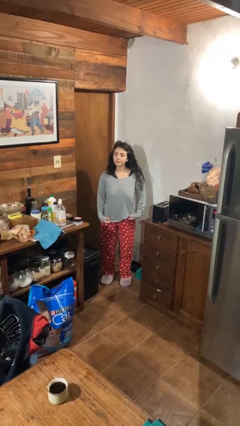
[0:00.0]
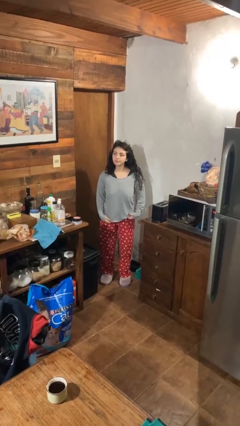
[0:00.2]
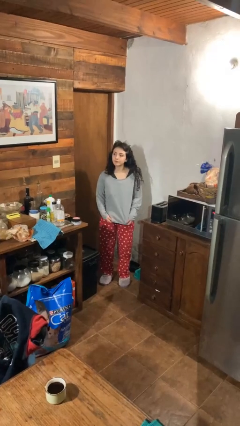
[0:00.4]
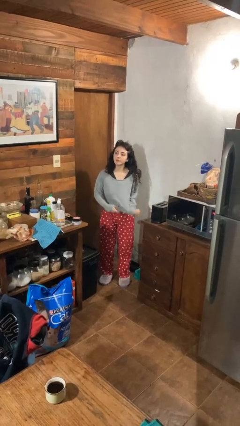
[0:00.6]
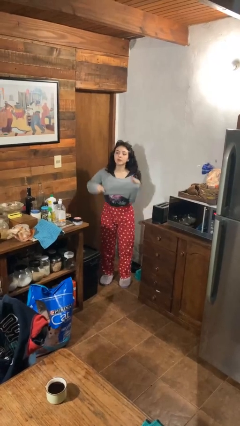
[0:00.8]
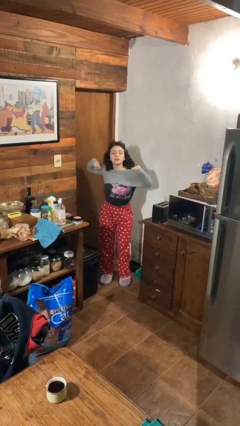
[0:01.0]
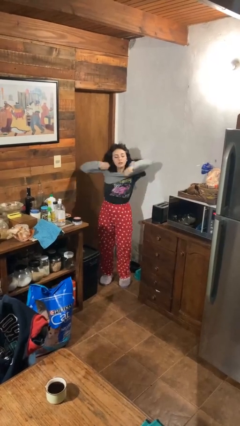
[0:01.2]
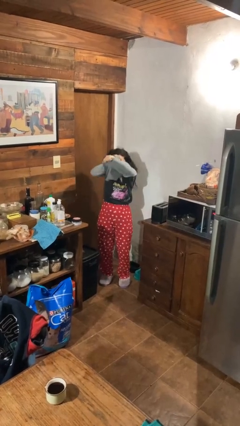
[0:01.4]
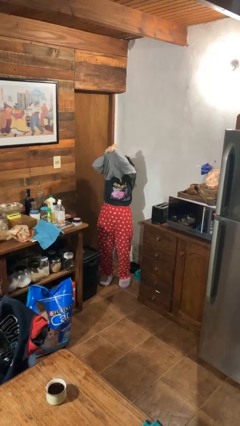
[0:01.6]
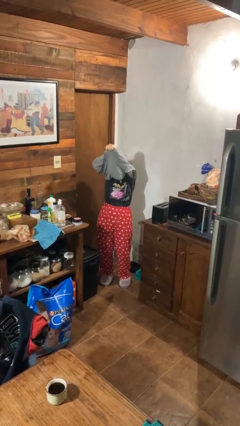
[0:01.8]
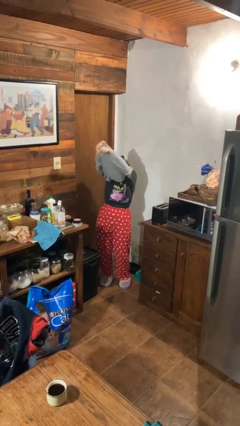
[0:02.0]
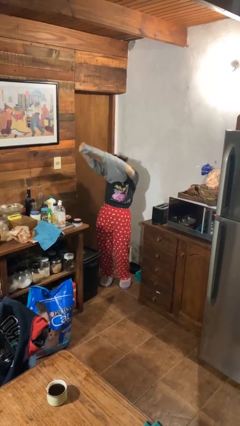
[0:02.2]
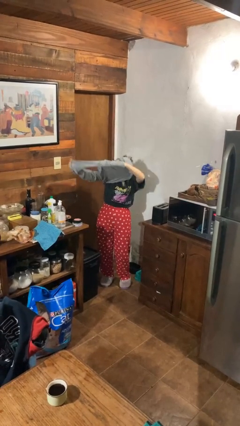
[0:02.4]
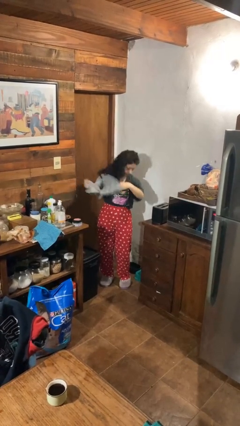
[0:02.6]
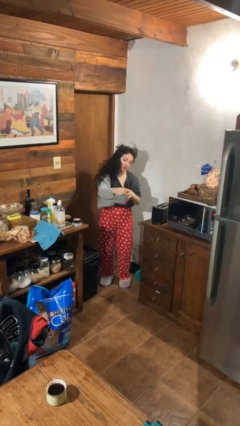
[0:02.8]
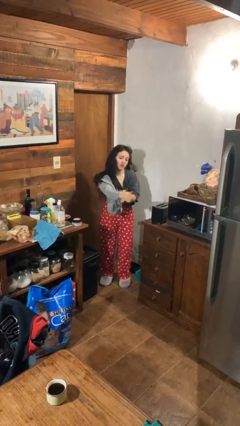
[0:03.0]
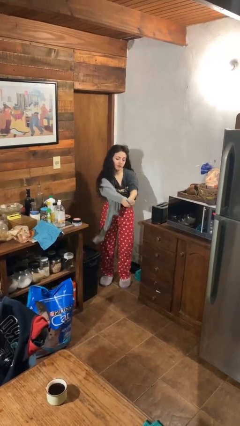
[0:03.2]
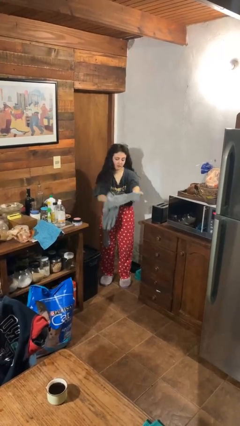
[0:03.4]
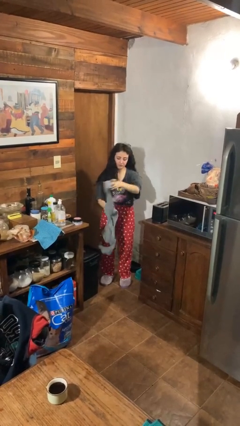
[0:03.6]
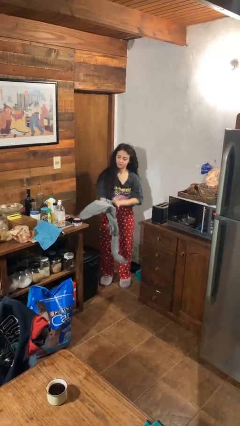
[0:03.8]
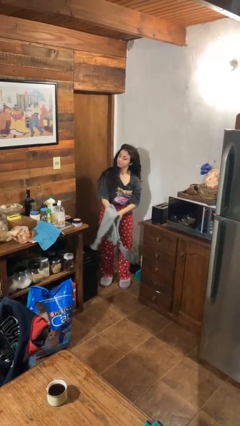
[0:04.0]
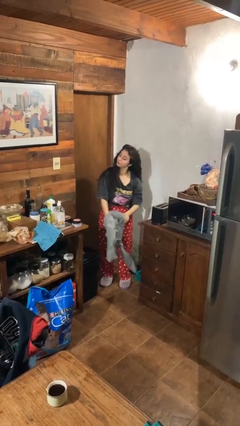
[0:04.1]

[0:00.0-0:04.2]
person takes off shirt

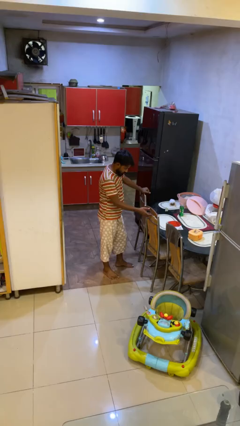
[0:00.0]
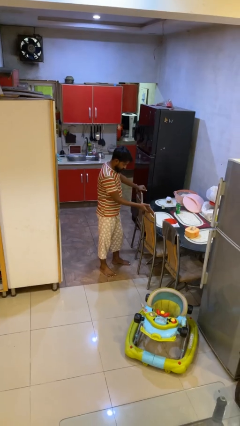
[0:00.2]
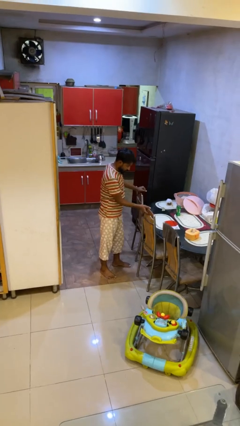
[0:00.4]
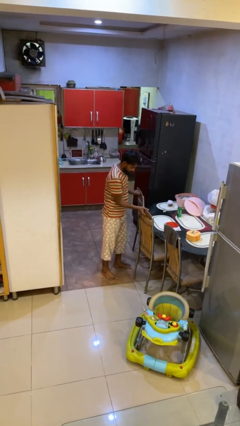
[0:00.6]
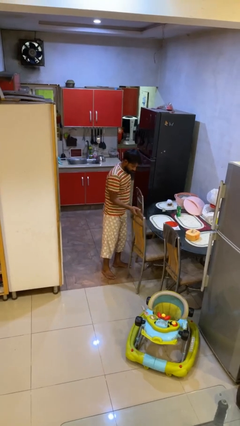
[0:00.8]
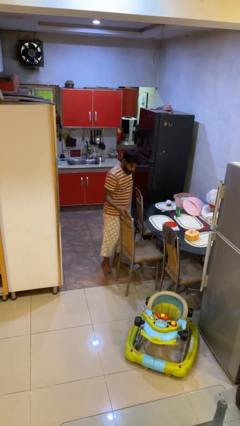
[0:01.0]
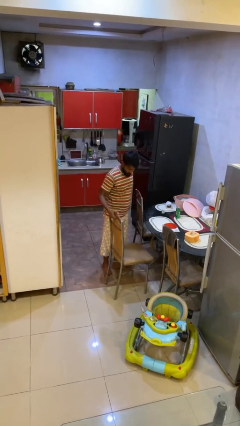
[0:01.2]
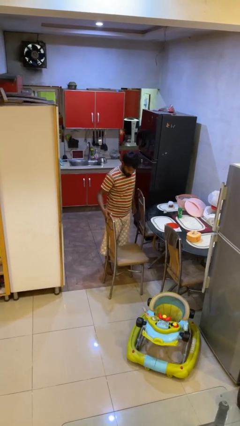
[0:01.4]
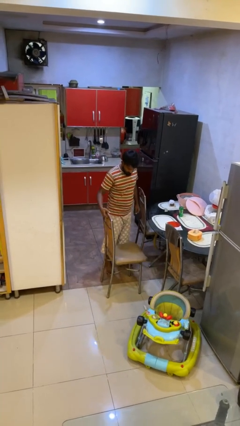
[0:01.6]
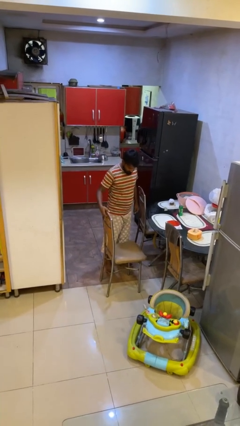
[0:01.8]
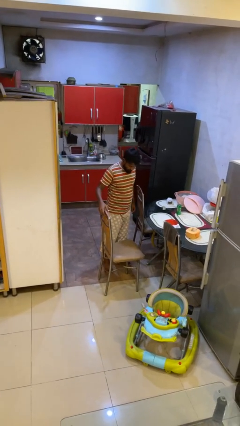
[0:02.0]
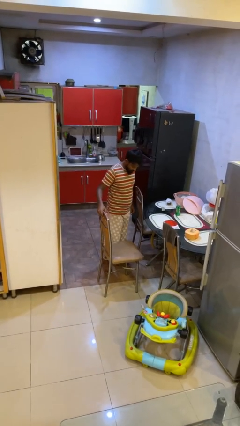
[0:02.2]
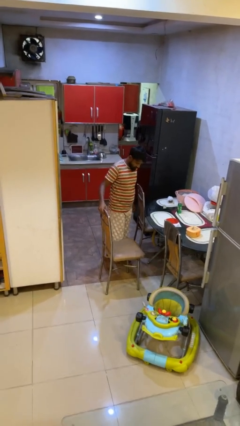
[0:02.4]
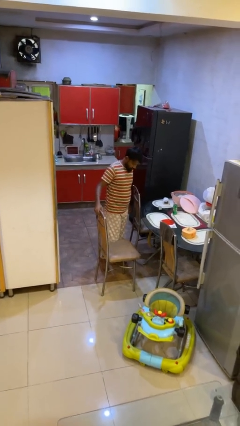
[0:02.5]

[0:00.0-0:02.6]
person pulls out chair

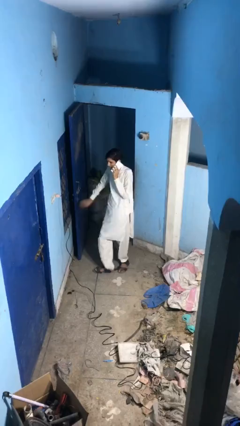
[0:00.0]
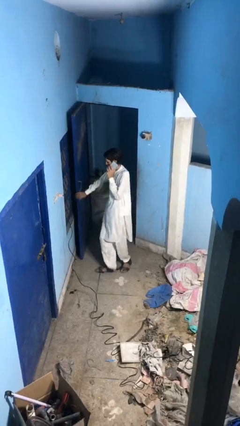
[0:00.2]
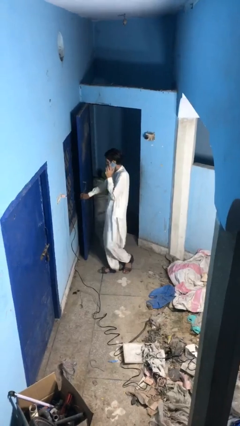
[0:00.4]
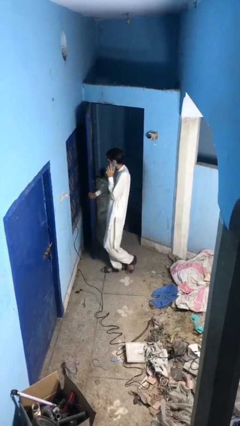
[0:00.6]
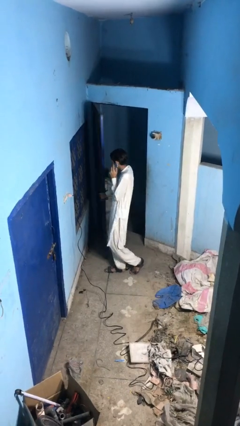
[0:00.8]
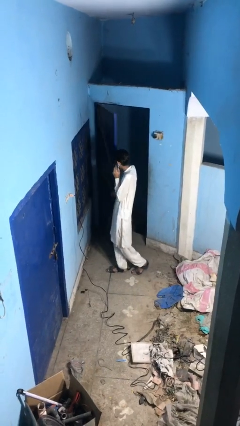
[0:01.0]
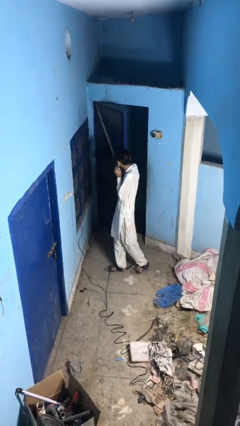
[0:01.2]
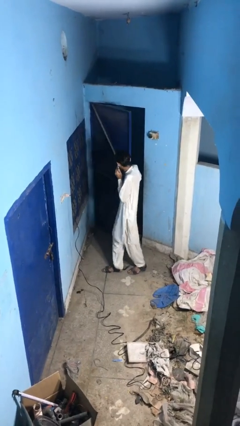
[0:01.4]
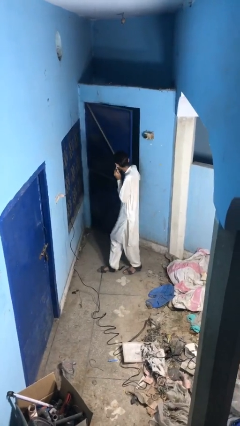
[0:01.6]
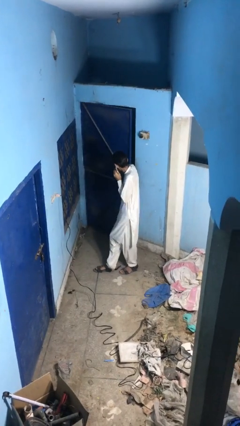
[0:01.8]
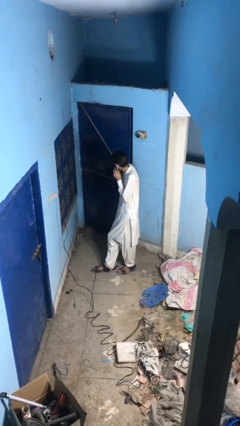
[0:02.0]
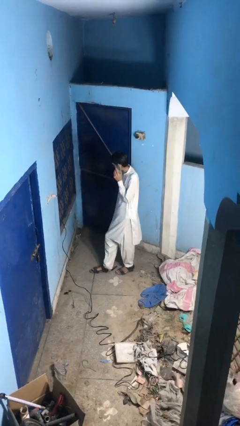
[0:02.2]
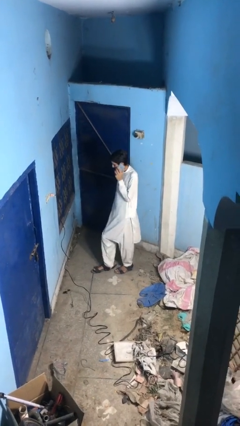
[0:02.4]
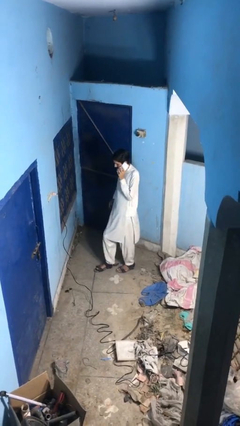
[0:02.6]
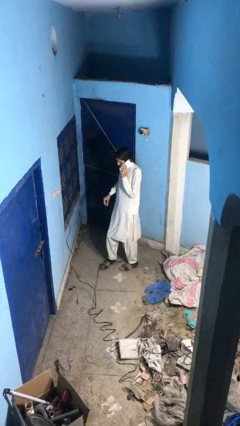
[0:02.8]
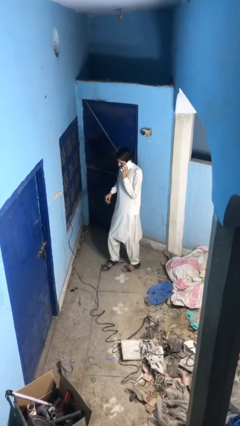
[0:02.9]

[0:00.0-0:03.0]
person closes facility door

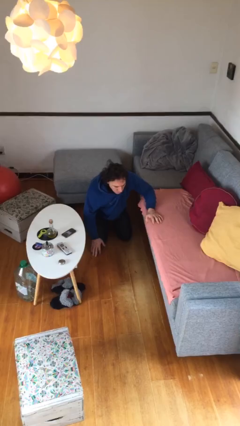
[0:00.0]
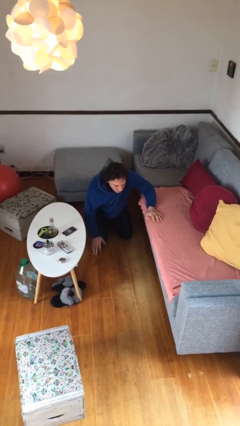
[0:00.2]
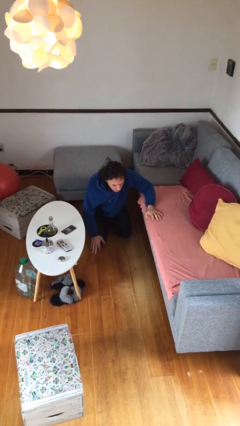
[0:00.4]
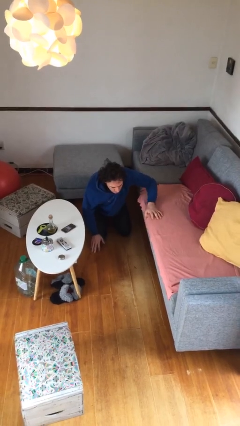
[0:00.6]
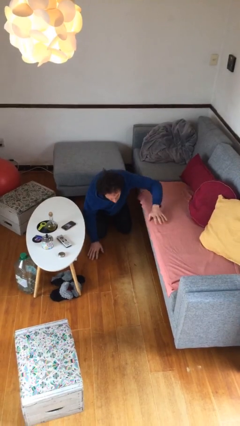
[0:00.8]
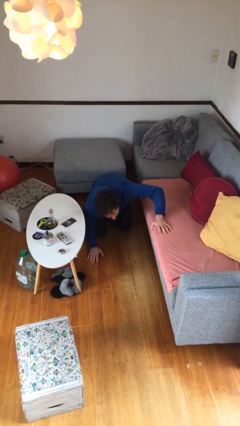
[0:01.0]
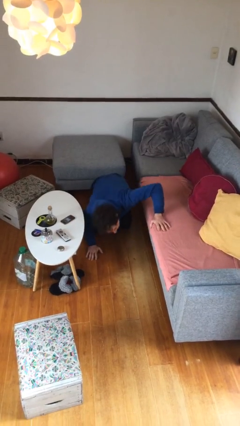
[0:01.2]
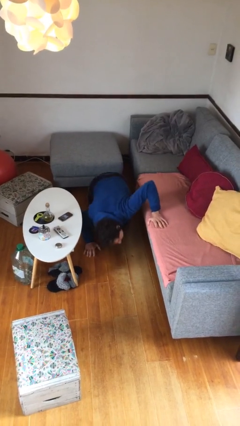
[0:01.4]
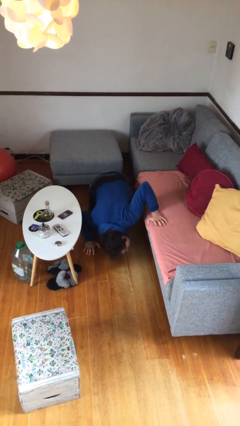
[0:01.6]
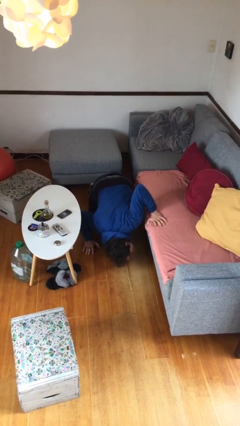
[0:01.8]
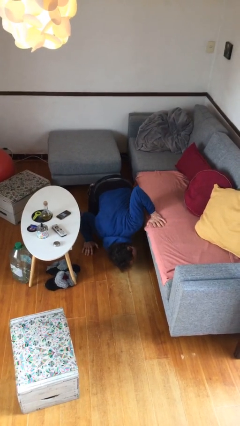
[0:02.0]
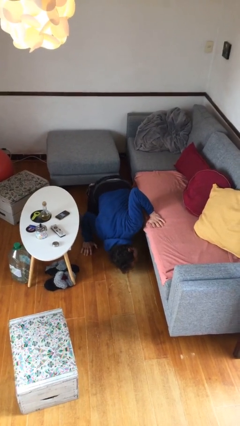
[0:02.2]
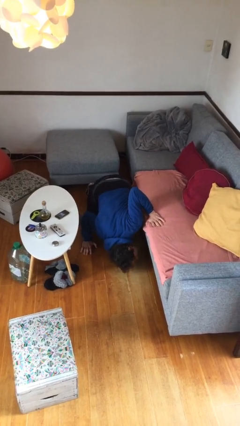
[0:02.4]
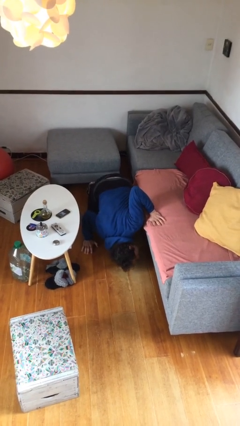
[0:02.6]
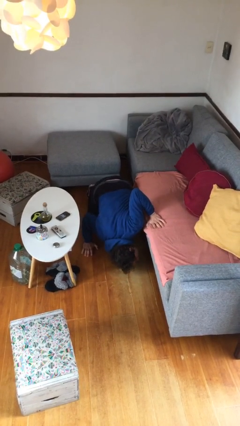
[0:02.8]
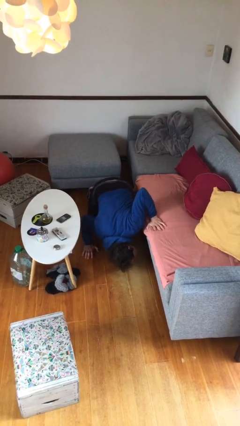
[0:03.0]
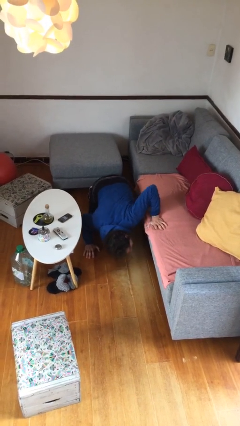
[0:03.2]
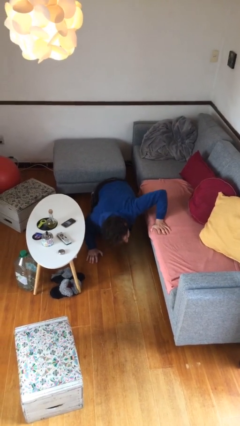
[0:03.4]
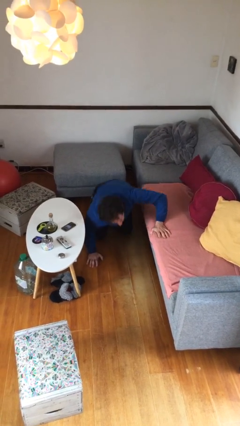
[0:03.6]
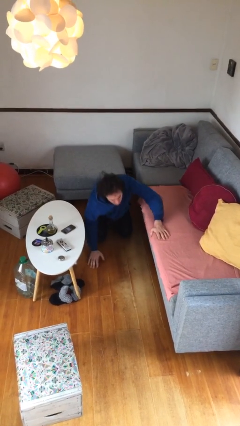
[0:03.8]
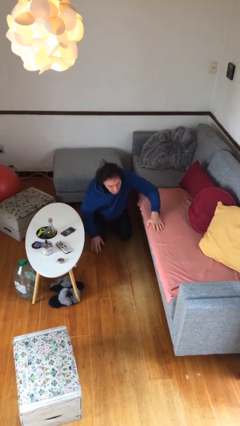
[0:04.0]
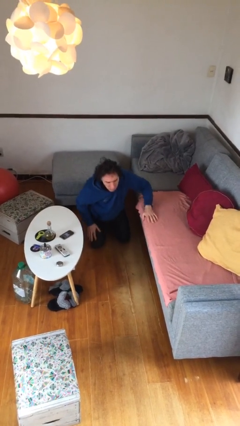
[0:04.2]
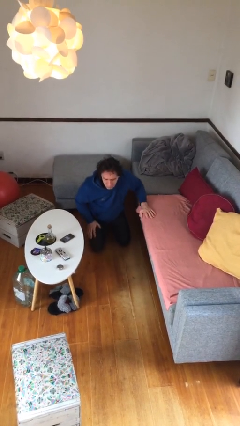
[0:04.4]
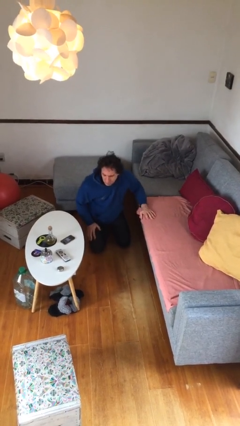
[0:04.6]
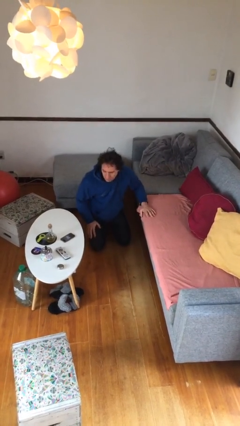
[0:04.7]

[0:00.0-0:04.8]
person searches under couch

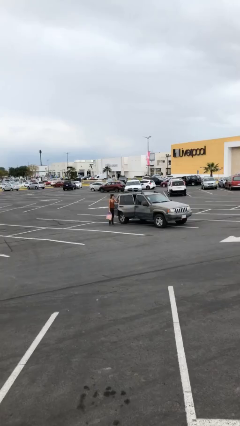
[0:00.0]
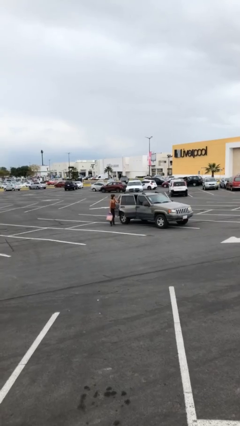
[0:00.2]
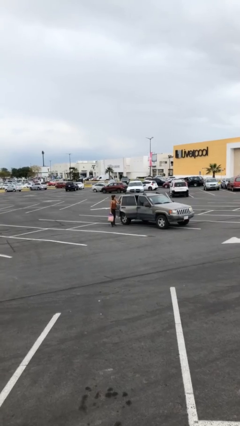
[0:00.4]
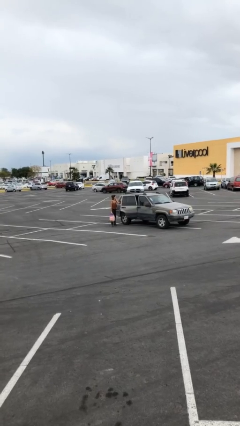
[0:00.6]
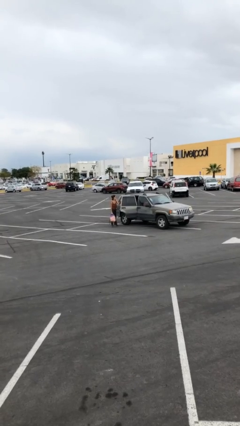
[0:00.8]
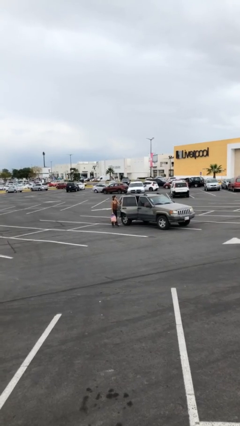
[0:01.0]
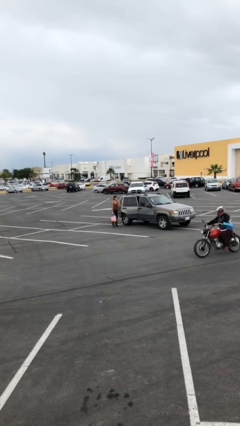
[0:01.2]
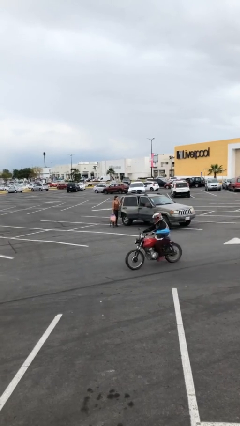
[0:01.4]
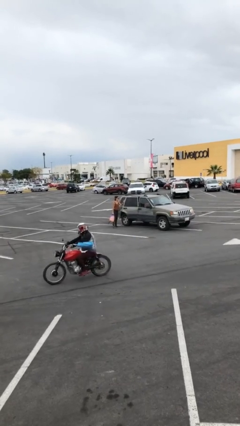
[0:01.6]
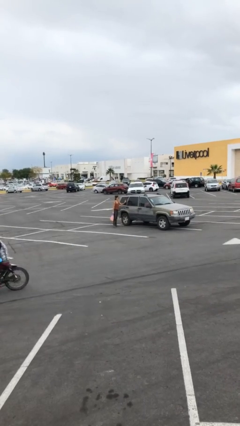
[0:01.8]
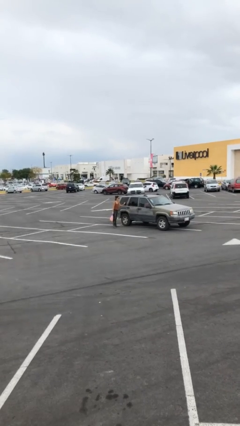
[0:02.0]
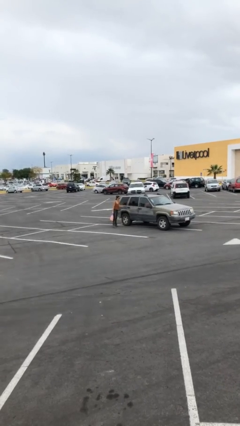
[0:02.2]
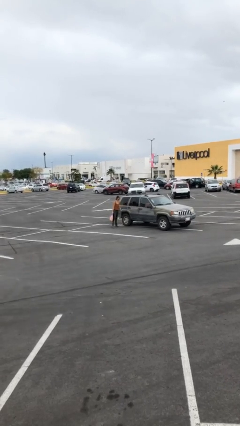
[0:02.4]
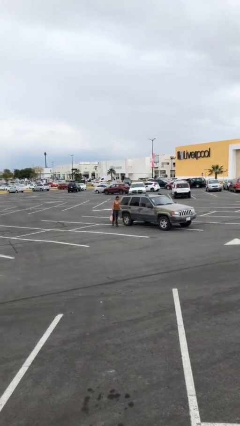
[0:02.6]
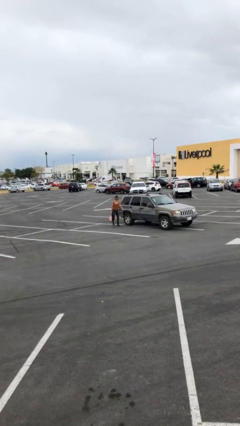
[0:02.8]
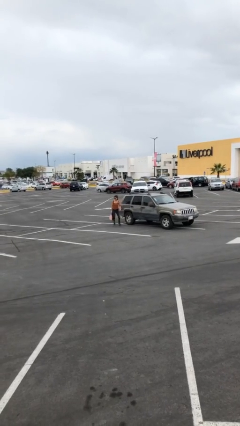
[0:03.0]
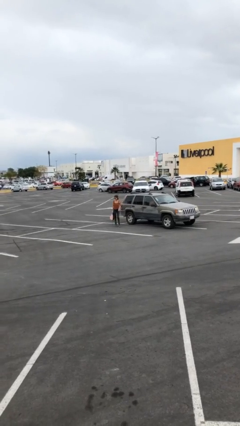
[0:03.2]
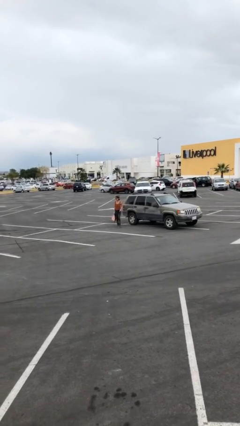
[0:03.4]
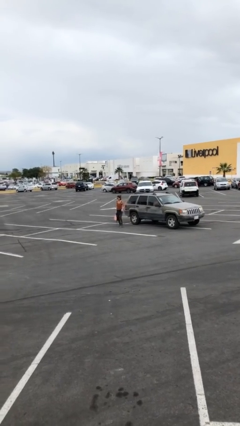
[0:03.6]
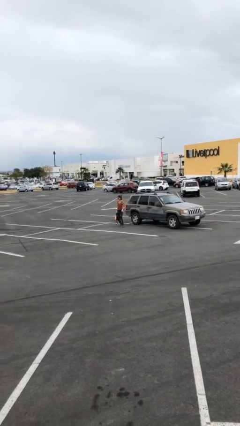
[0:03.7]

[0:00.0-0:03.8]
person closes car door
